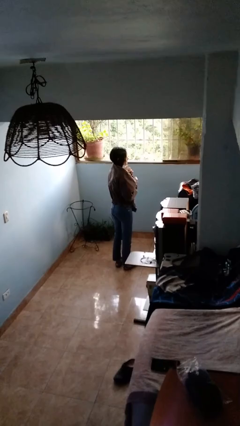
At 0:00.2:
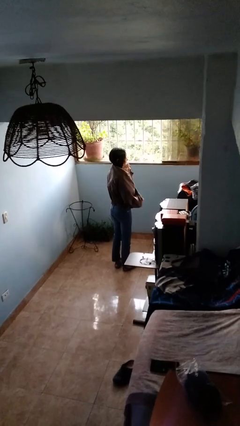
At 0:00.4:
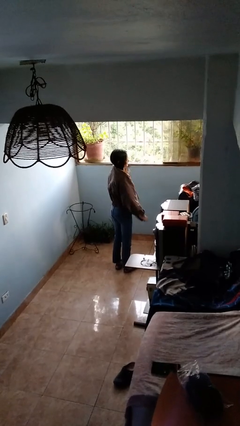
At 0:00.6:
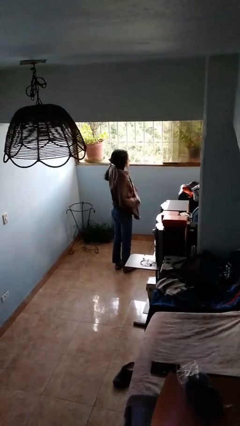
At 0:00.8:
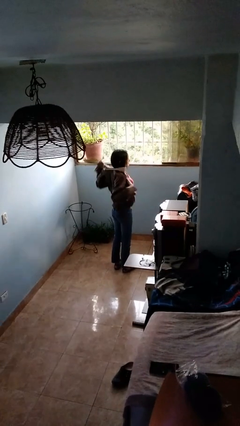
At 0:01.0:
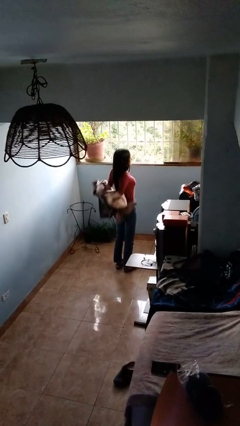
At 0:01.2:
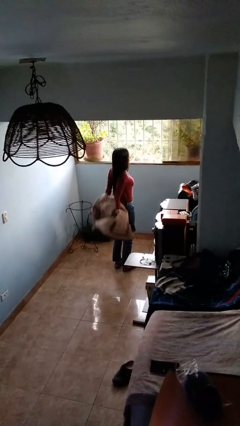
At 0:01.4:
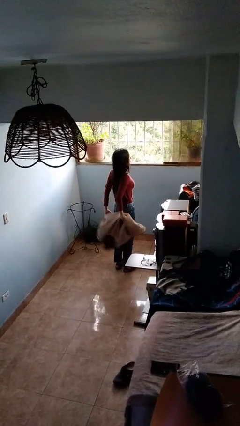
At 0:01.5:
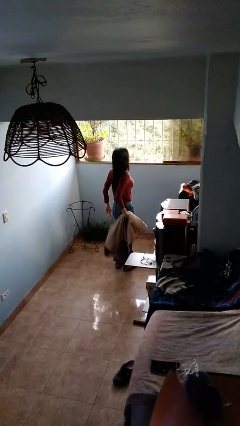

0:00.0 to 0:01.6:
person unzips jacket

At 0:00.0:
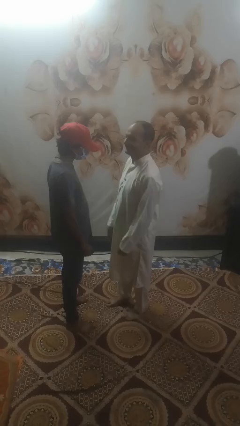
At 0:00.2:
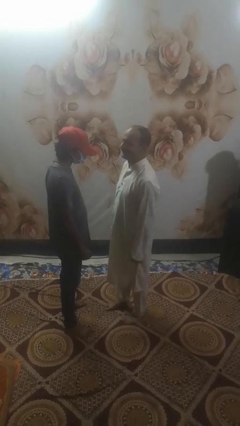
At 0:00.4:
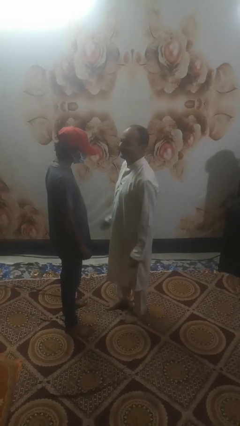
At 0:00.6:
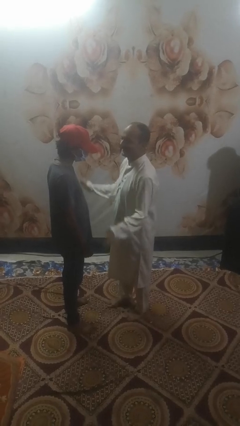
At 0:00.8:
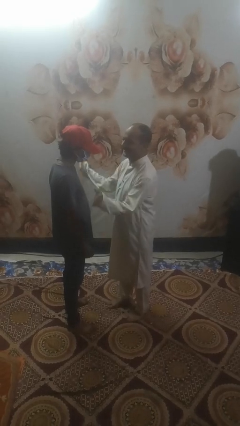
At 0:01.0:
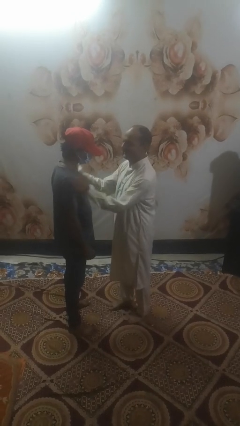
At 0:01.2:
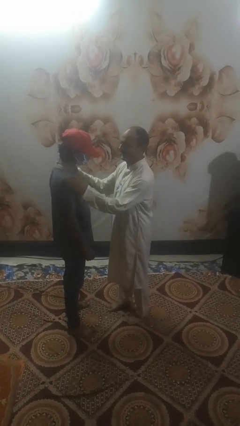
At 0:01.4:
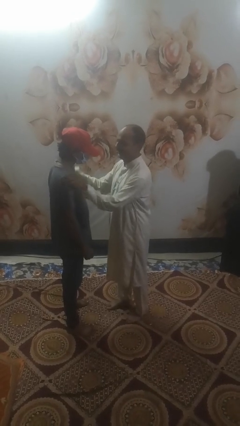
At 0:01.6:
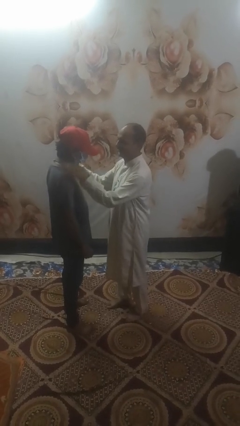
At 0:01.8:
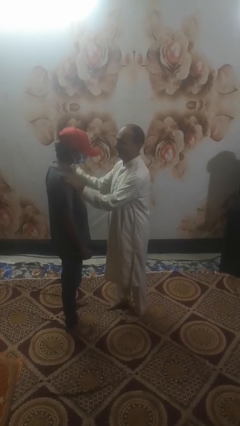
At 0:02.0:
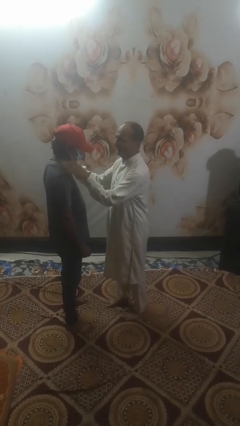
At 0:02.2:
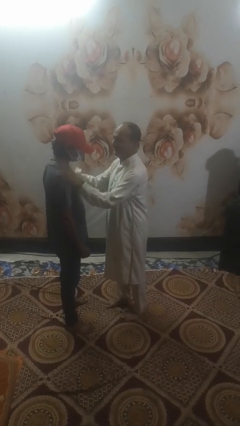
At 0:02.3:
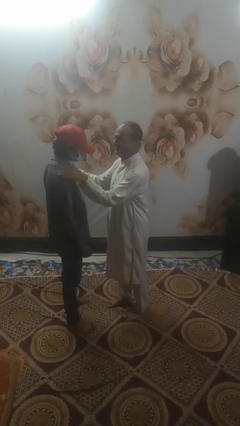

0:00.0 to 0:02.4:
person pounds shoulders of person

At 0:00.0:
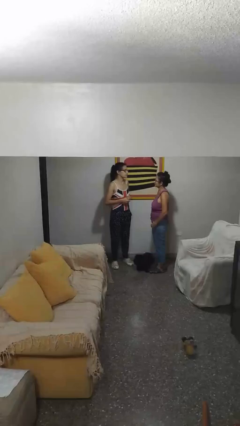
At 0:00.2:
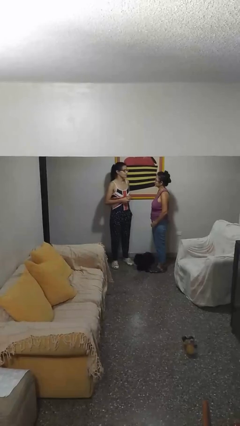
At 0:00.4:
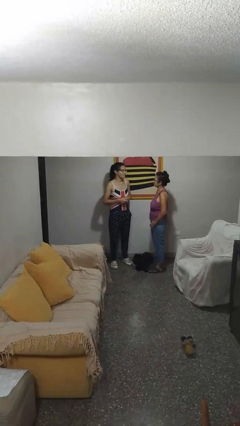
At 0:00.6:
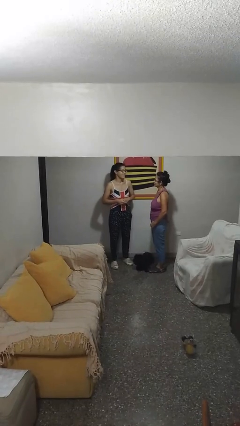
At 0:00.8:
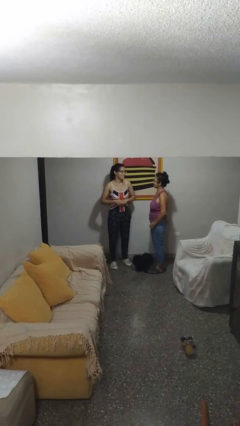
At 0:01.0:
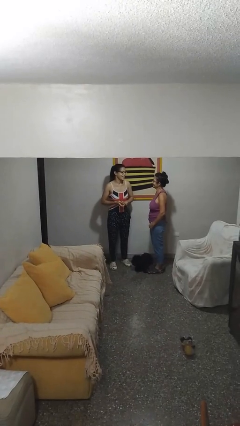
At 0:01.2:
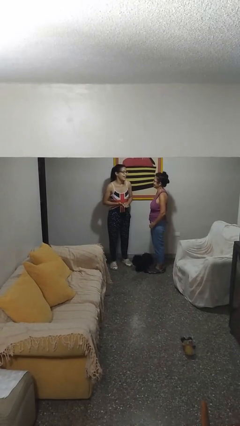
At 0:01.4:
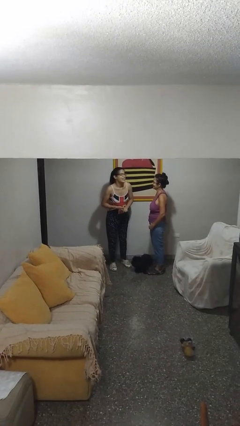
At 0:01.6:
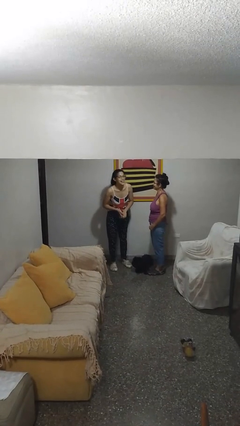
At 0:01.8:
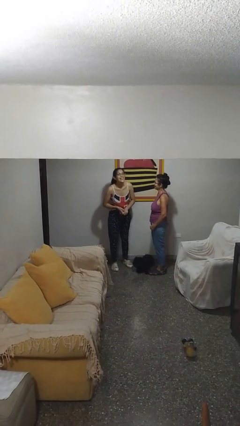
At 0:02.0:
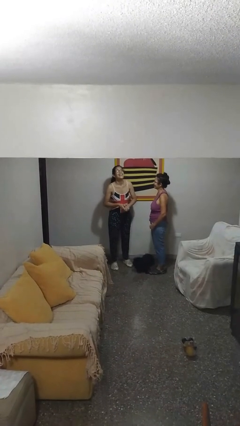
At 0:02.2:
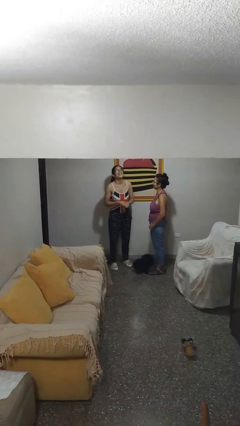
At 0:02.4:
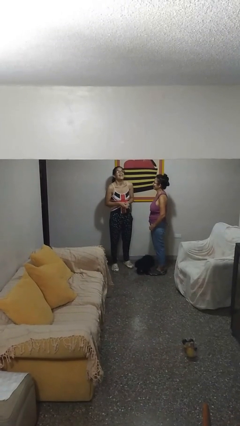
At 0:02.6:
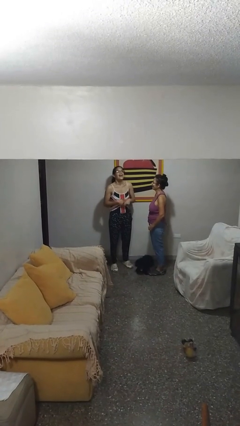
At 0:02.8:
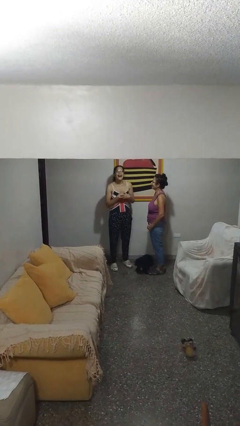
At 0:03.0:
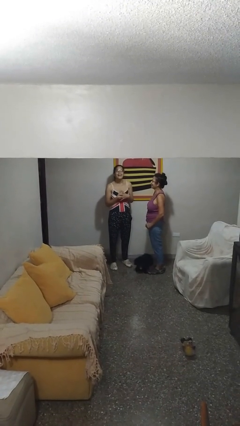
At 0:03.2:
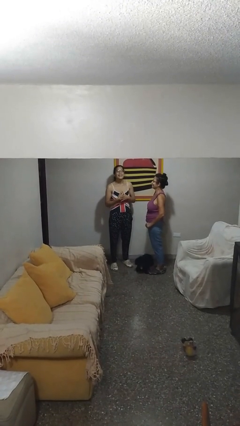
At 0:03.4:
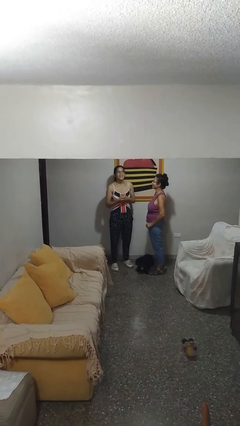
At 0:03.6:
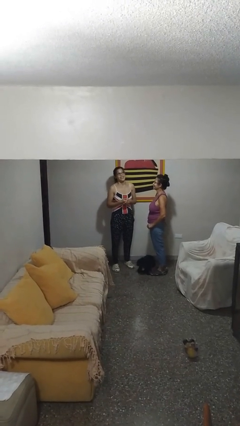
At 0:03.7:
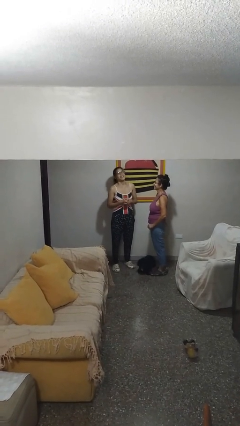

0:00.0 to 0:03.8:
person laughs with person

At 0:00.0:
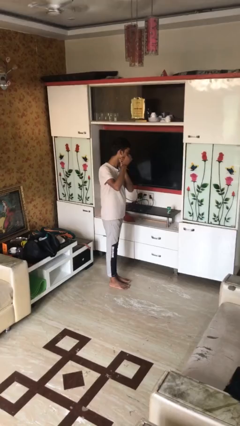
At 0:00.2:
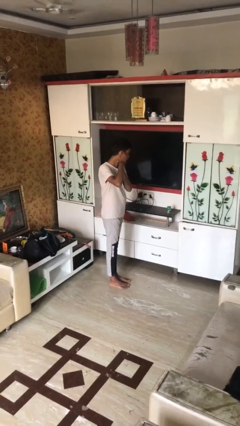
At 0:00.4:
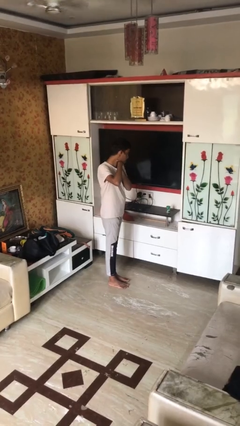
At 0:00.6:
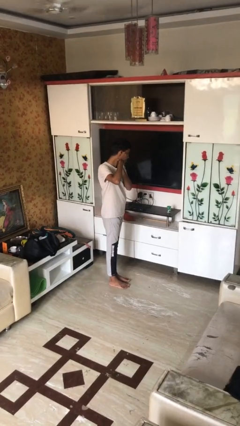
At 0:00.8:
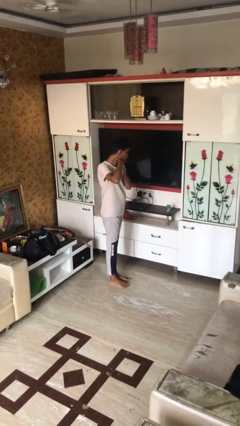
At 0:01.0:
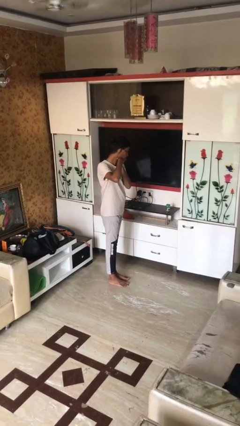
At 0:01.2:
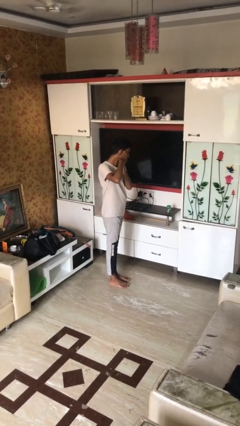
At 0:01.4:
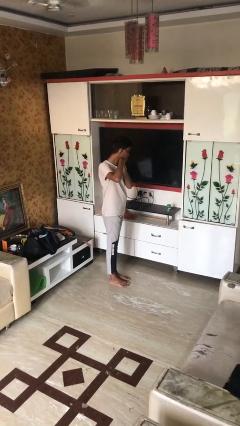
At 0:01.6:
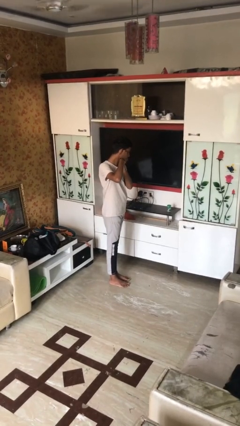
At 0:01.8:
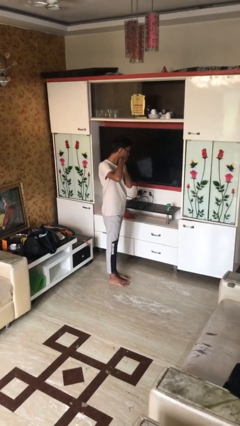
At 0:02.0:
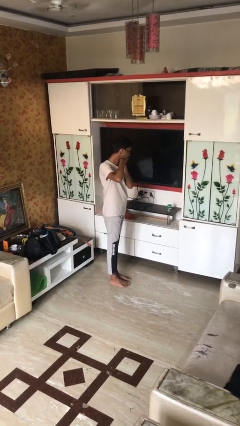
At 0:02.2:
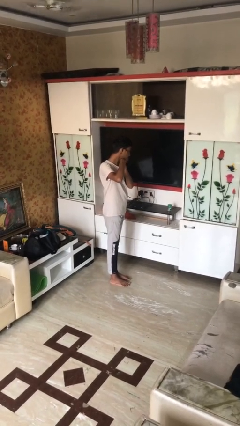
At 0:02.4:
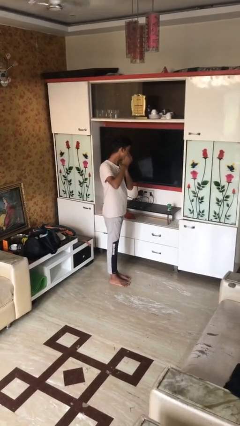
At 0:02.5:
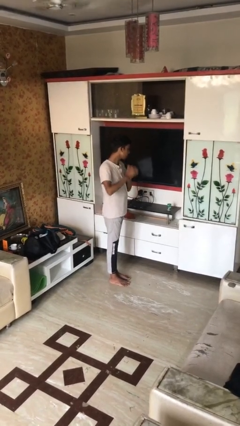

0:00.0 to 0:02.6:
person puts on earrings

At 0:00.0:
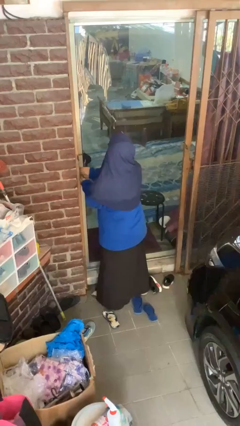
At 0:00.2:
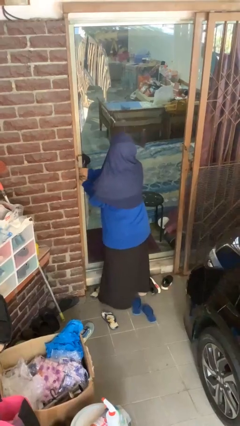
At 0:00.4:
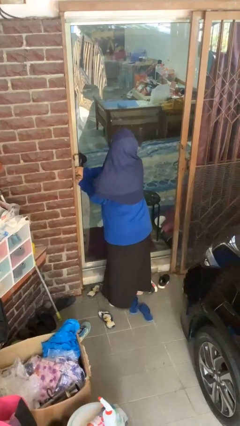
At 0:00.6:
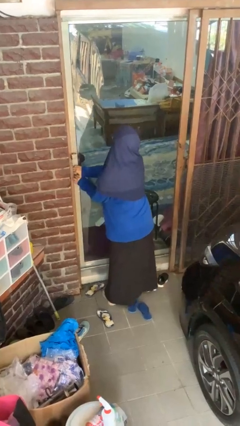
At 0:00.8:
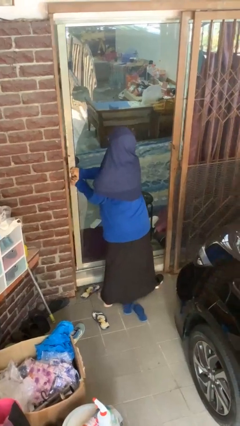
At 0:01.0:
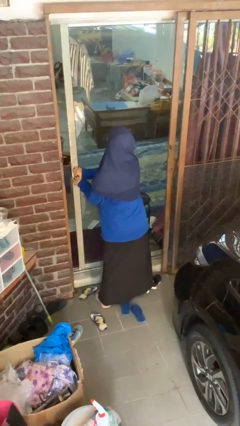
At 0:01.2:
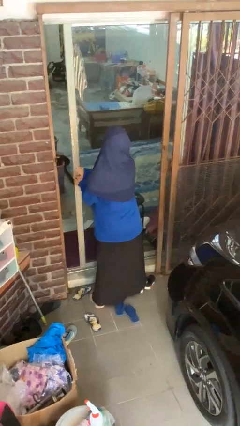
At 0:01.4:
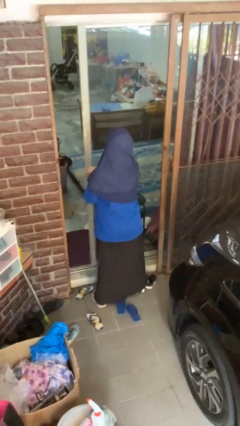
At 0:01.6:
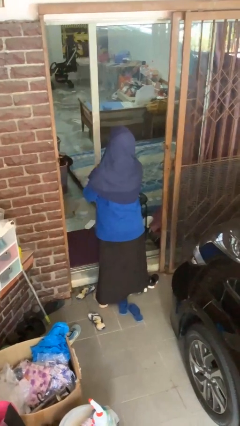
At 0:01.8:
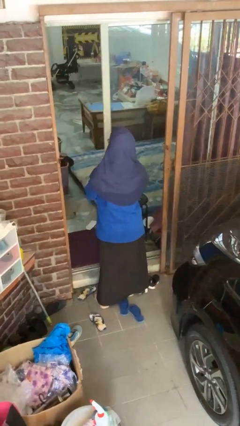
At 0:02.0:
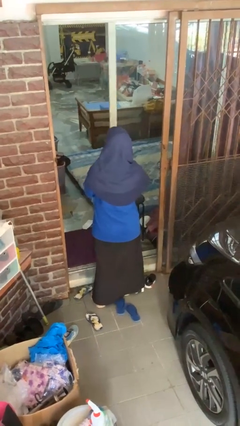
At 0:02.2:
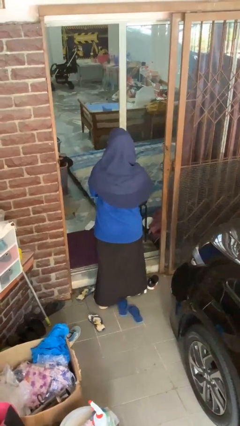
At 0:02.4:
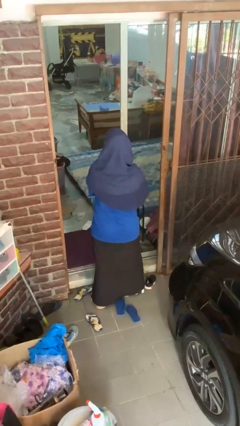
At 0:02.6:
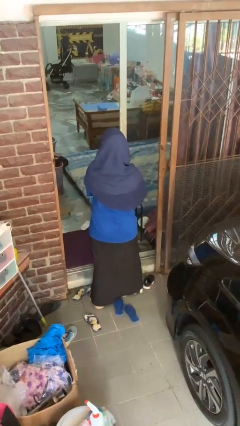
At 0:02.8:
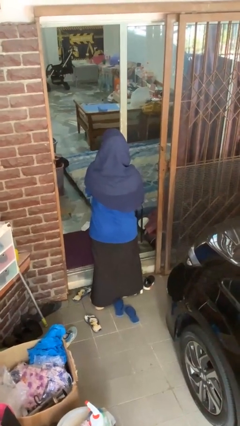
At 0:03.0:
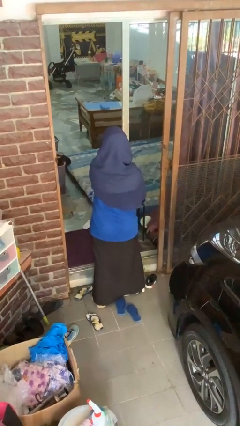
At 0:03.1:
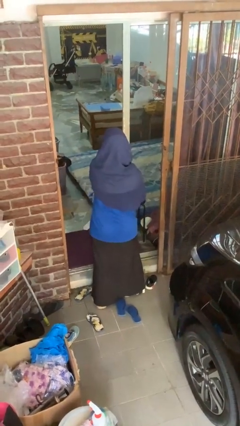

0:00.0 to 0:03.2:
person opens sliding door

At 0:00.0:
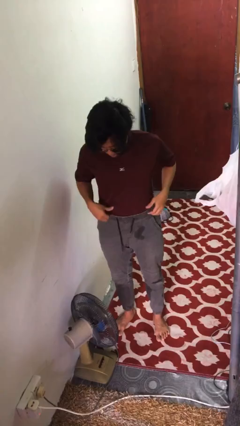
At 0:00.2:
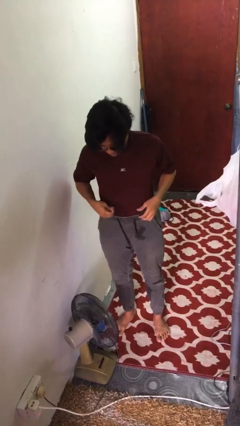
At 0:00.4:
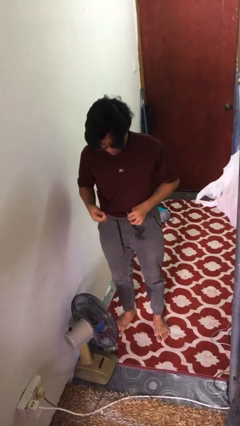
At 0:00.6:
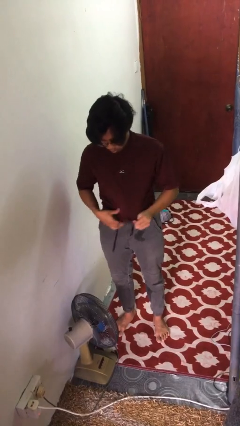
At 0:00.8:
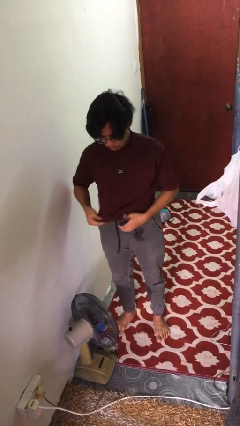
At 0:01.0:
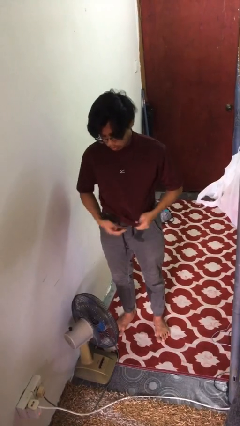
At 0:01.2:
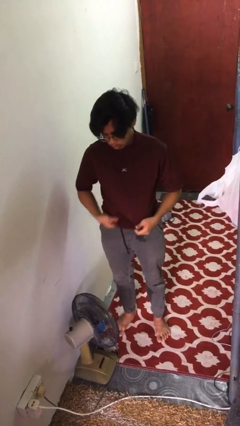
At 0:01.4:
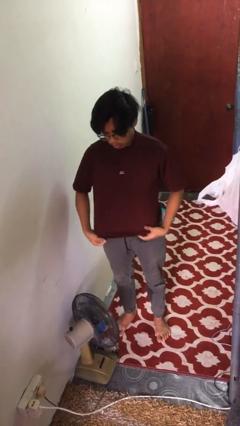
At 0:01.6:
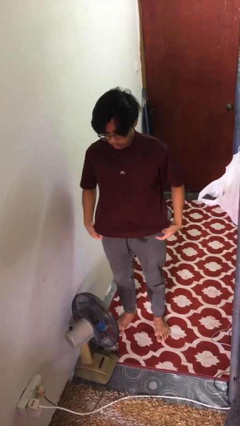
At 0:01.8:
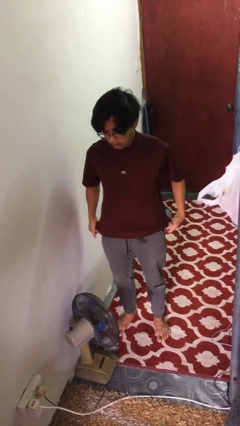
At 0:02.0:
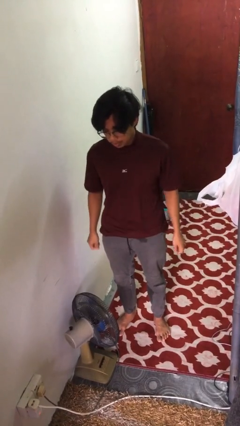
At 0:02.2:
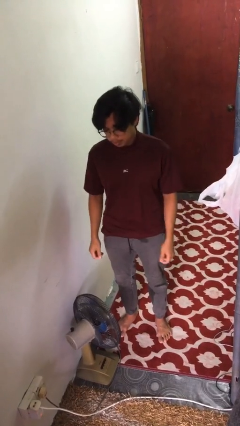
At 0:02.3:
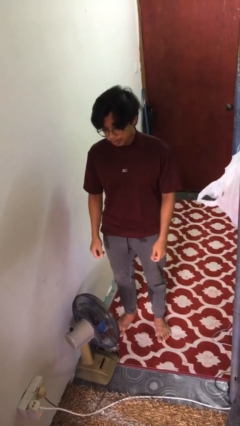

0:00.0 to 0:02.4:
person untucks shirt

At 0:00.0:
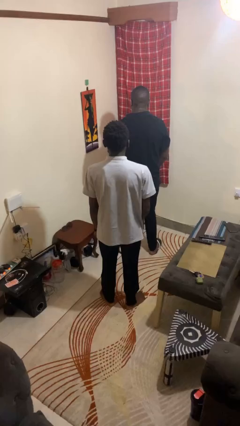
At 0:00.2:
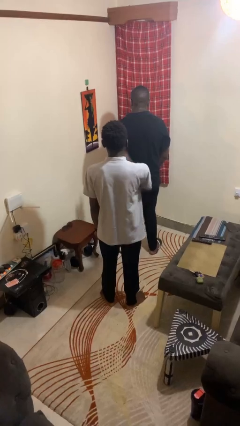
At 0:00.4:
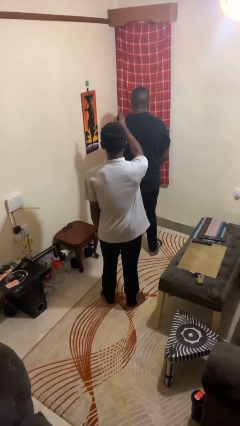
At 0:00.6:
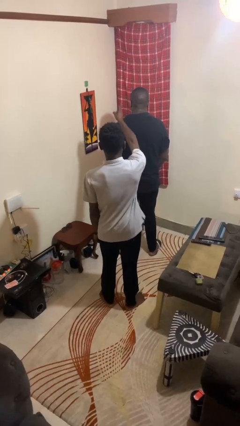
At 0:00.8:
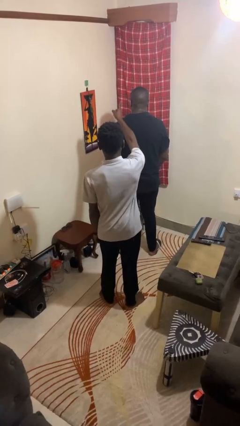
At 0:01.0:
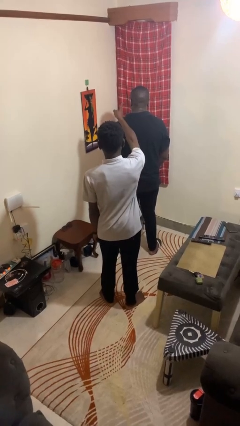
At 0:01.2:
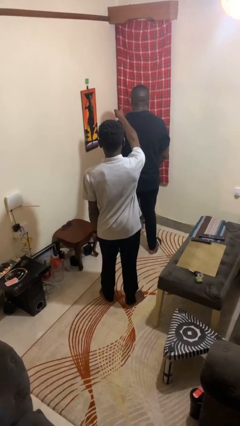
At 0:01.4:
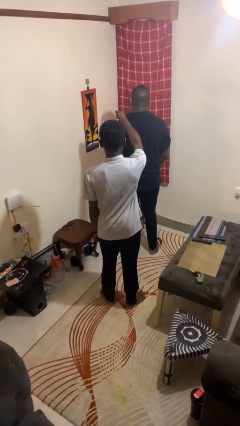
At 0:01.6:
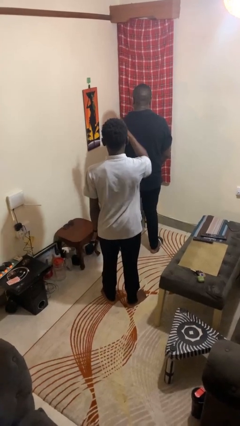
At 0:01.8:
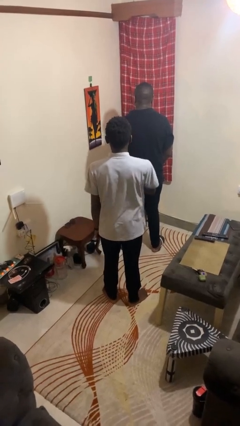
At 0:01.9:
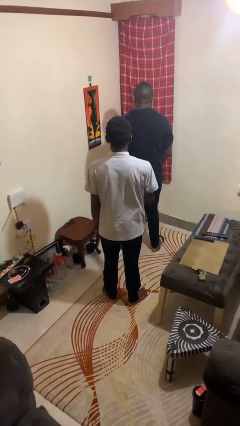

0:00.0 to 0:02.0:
person points at person
